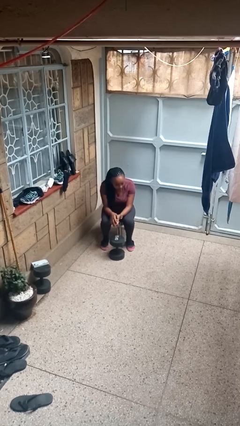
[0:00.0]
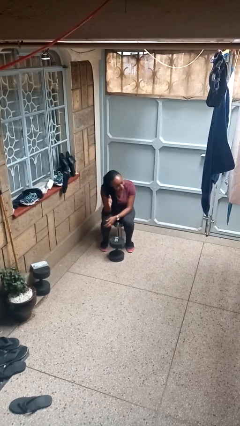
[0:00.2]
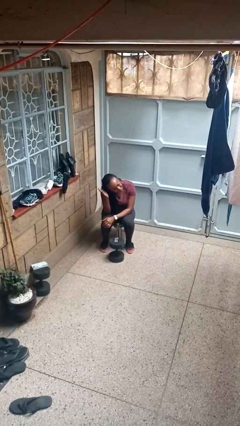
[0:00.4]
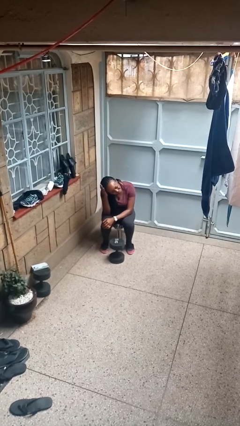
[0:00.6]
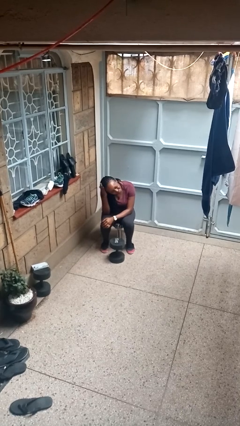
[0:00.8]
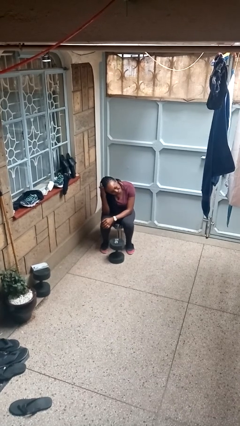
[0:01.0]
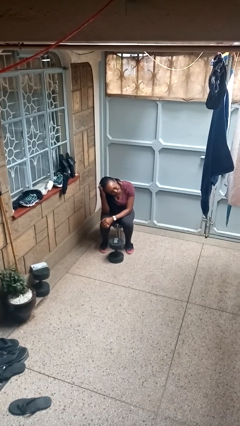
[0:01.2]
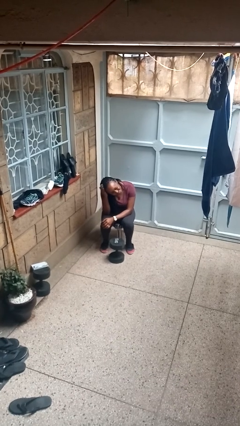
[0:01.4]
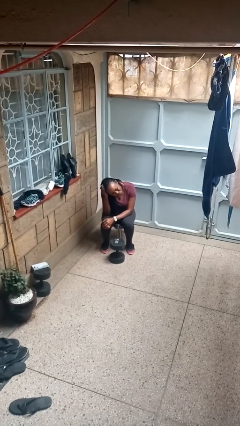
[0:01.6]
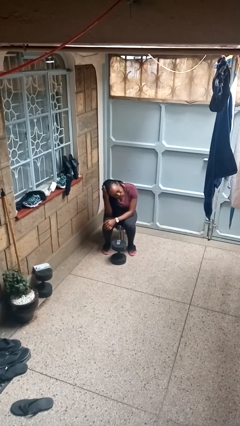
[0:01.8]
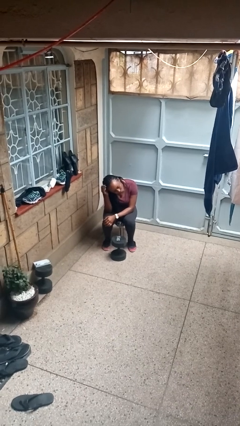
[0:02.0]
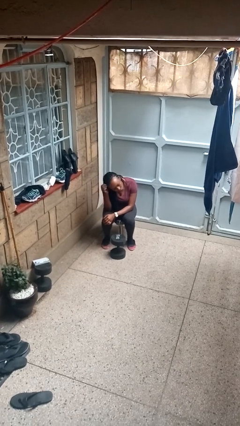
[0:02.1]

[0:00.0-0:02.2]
person pats head

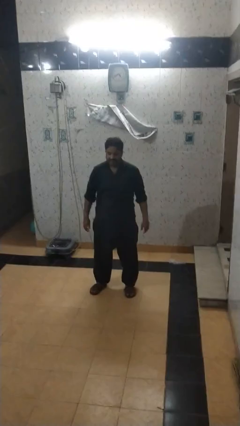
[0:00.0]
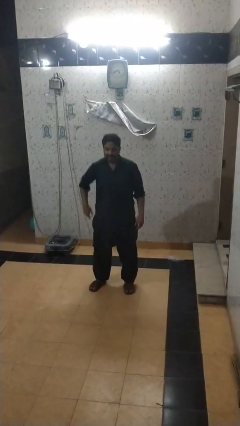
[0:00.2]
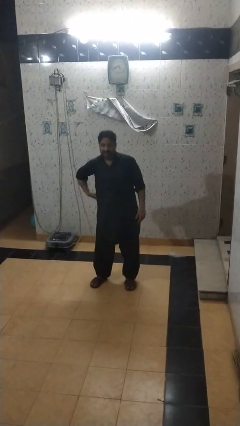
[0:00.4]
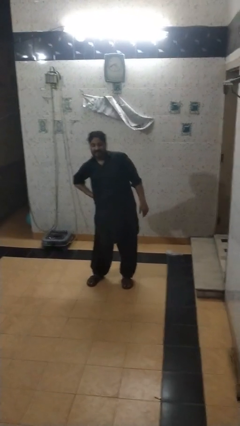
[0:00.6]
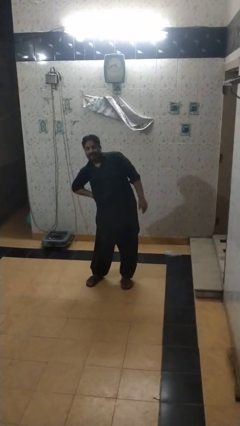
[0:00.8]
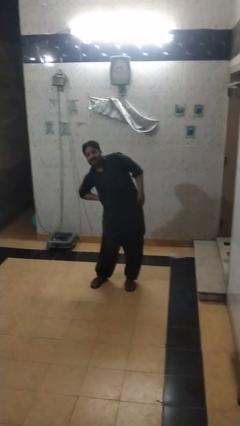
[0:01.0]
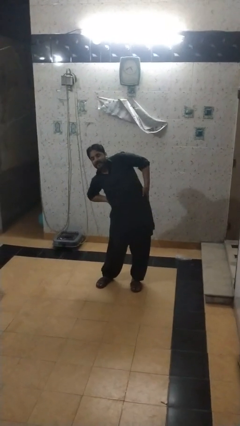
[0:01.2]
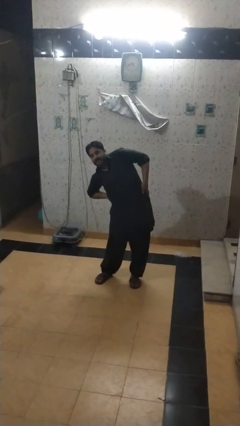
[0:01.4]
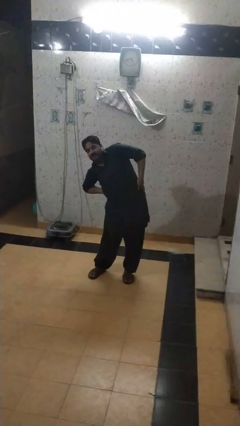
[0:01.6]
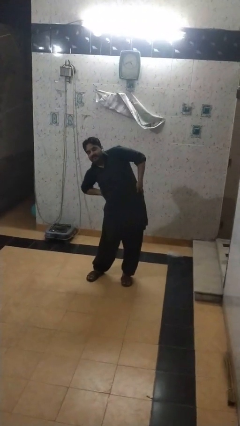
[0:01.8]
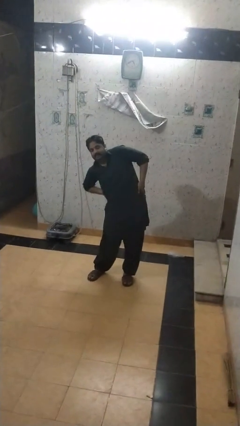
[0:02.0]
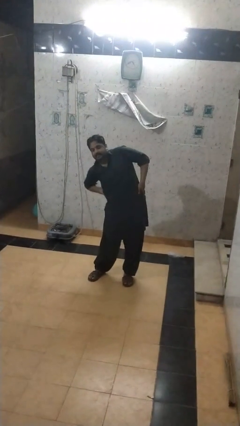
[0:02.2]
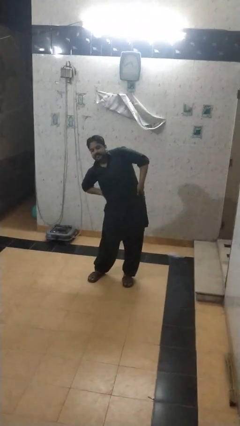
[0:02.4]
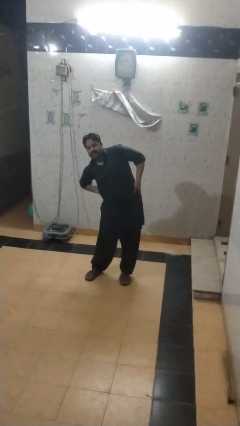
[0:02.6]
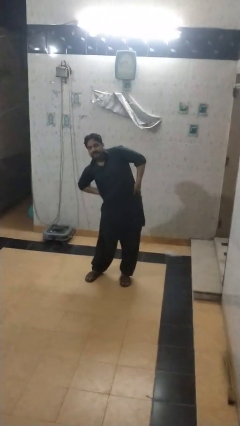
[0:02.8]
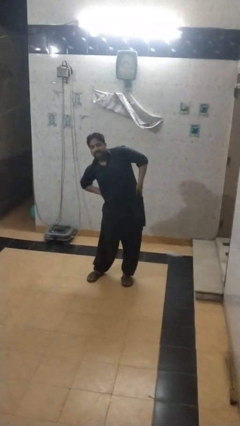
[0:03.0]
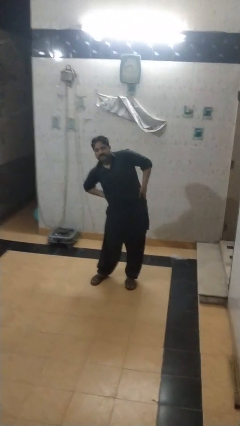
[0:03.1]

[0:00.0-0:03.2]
person stretches arms to side

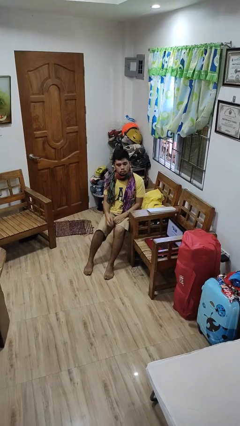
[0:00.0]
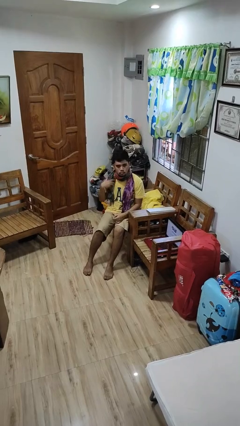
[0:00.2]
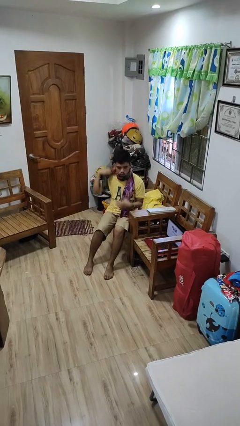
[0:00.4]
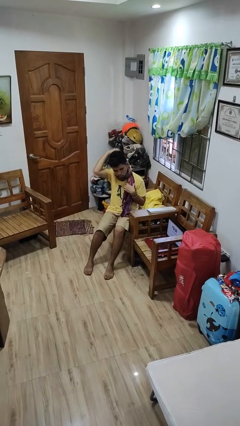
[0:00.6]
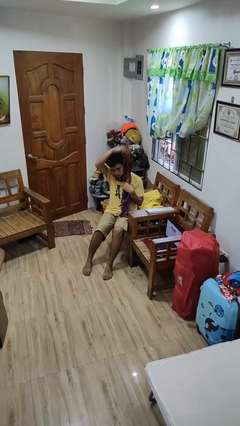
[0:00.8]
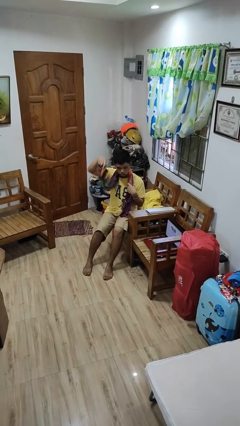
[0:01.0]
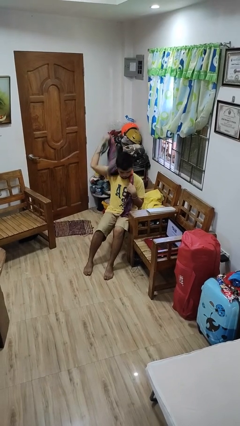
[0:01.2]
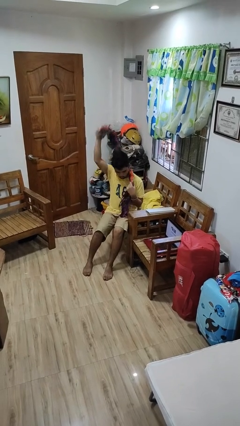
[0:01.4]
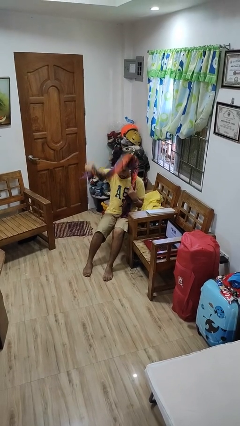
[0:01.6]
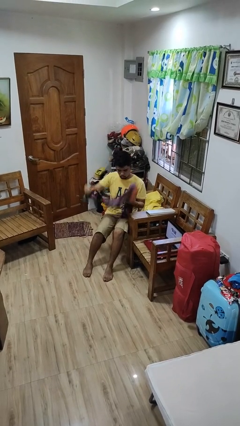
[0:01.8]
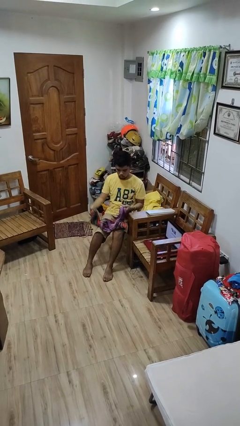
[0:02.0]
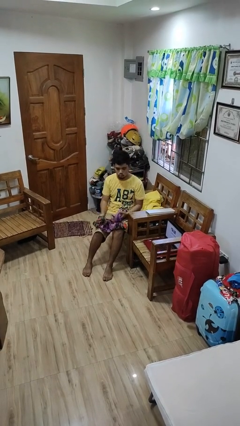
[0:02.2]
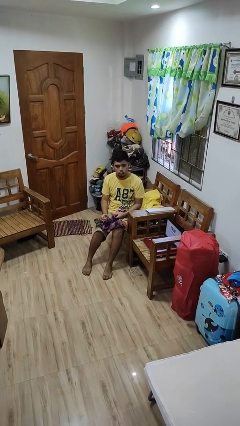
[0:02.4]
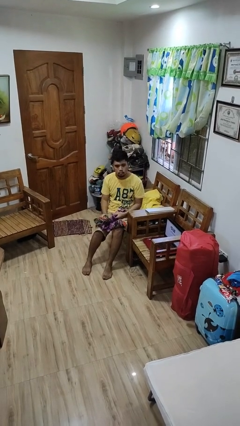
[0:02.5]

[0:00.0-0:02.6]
person takes off scarf

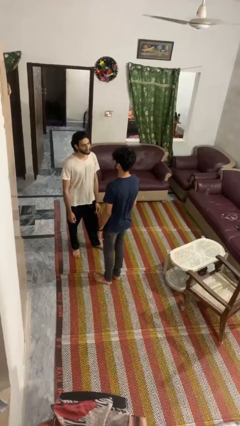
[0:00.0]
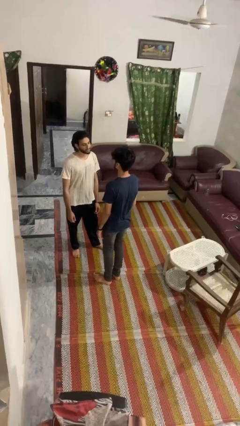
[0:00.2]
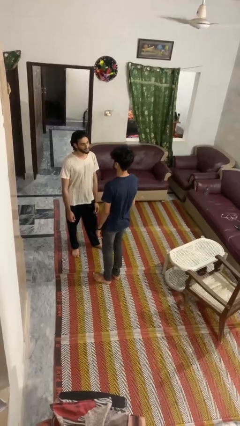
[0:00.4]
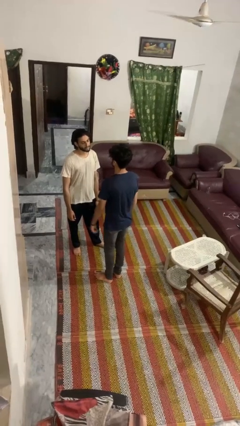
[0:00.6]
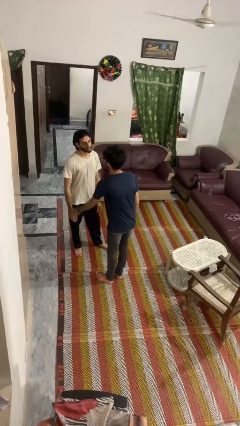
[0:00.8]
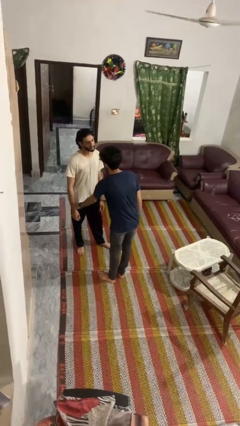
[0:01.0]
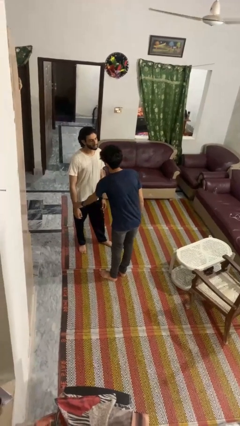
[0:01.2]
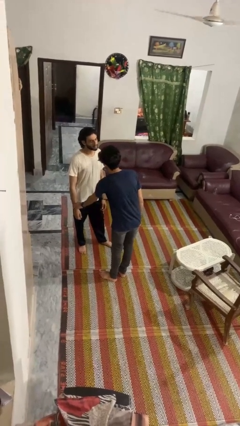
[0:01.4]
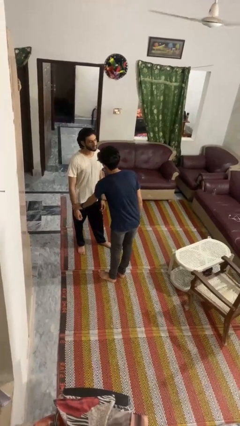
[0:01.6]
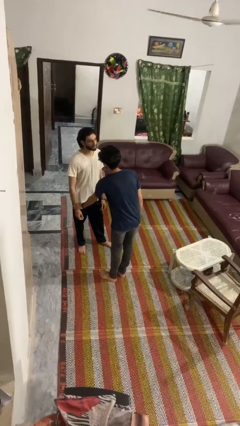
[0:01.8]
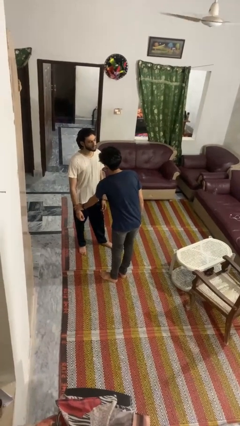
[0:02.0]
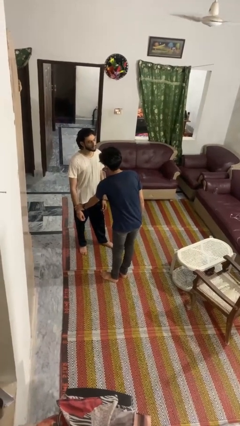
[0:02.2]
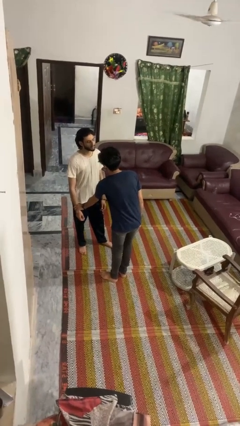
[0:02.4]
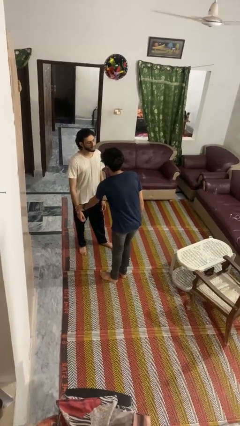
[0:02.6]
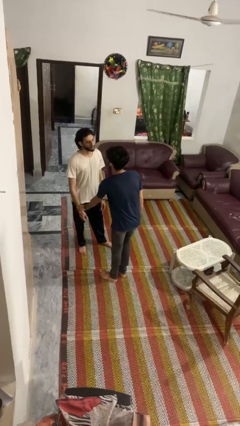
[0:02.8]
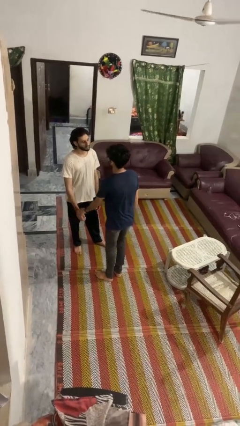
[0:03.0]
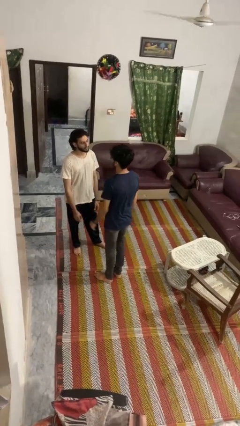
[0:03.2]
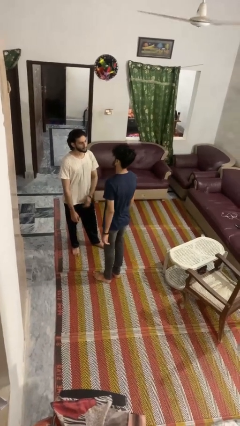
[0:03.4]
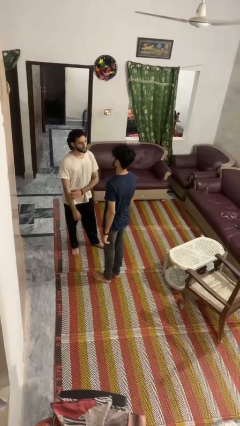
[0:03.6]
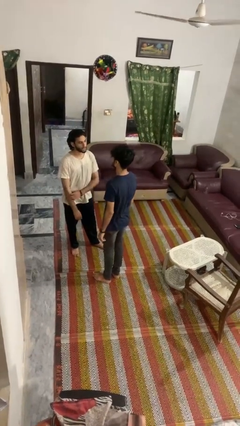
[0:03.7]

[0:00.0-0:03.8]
person grabs person by forearm

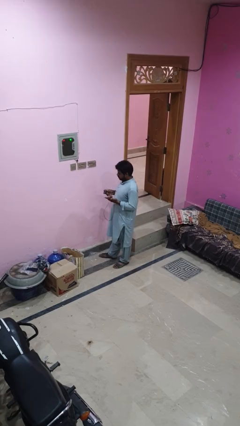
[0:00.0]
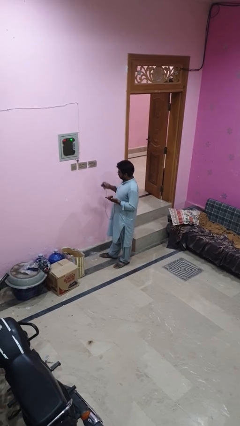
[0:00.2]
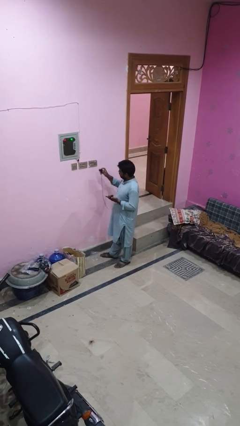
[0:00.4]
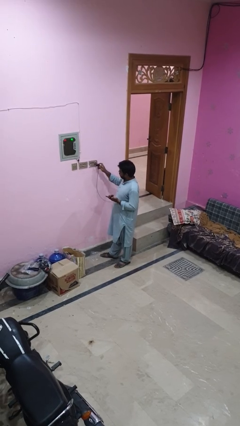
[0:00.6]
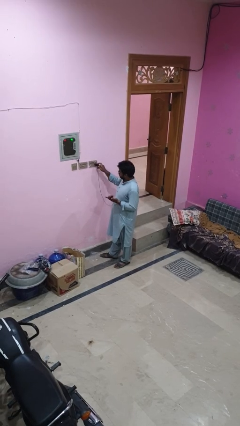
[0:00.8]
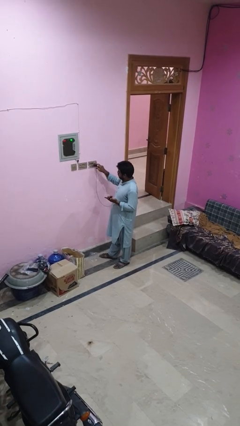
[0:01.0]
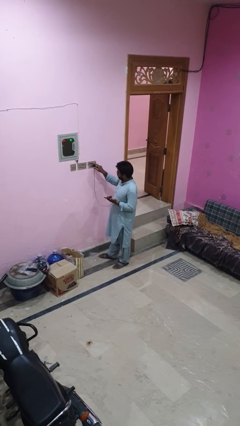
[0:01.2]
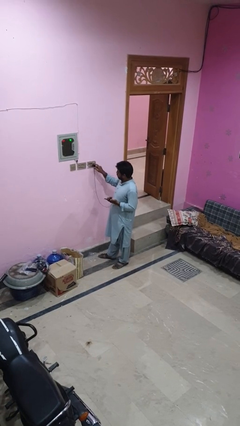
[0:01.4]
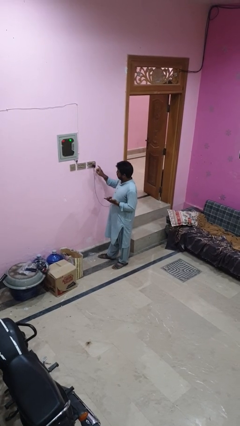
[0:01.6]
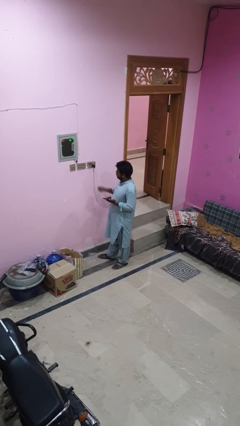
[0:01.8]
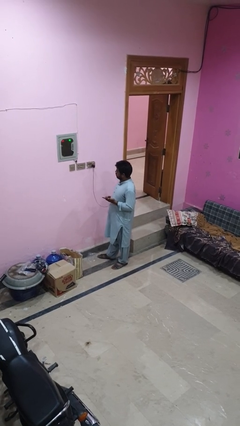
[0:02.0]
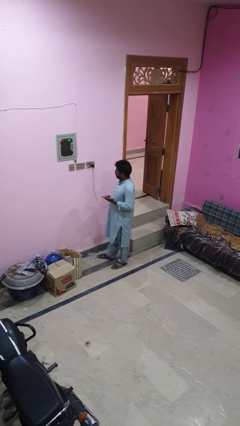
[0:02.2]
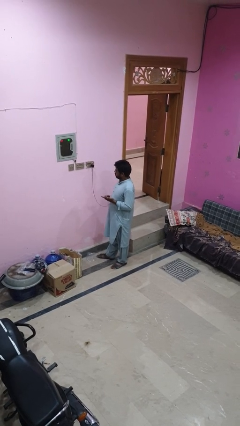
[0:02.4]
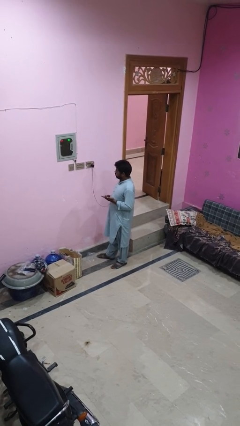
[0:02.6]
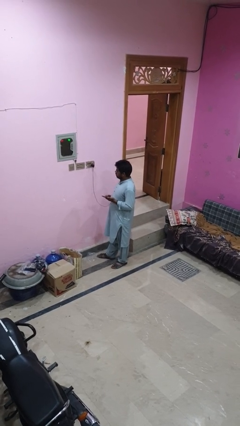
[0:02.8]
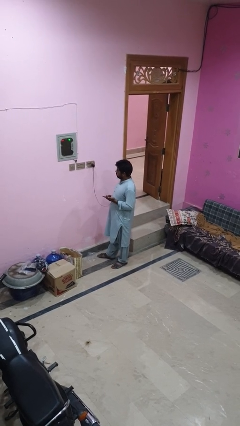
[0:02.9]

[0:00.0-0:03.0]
person plugs into electrical socket

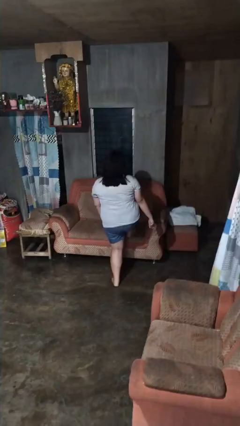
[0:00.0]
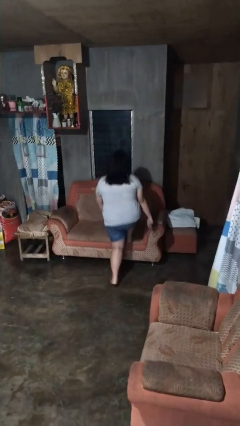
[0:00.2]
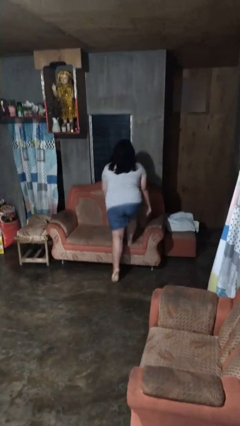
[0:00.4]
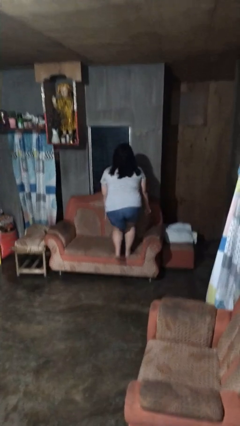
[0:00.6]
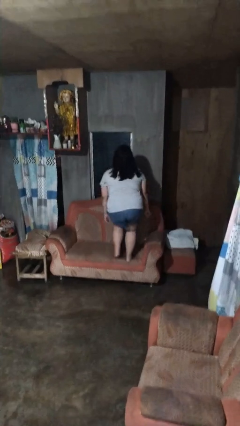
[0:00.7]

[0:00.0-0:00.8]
person climbs on couch

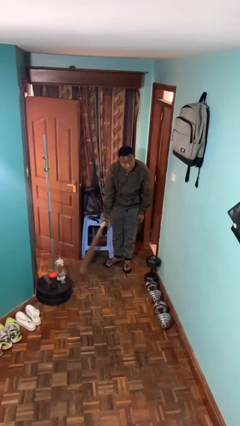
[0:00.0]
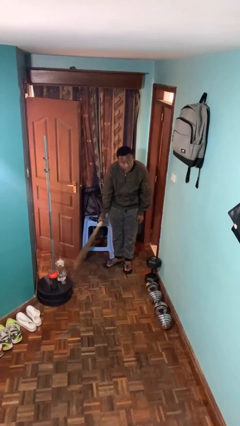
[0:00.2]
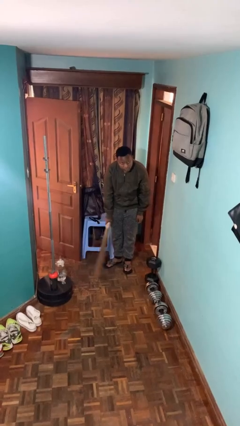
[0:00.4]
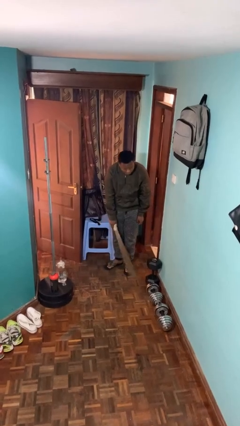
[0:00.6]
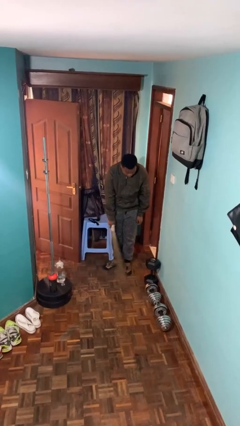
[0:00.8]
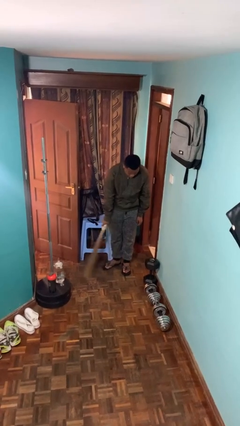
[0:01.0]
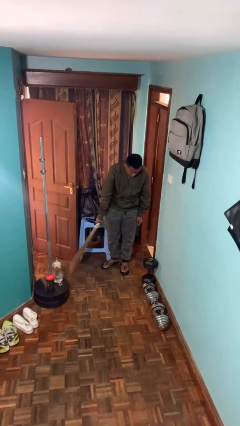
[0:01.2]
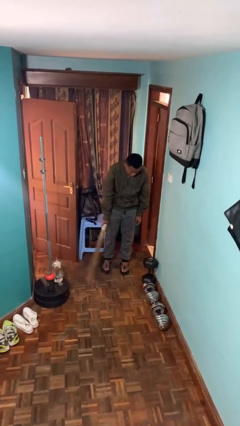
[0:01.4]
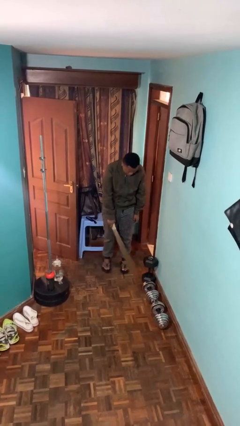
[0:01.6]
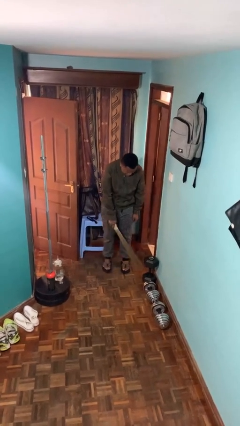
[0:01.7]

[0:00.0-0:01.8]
person sweeps floor
